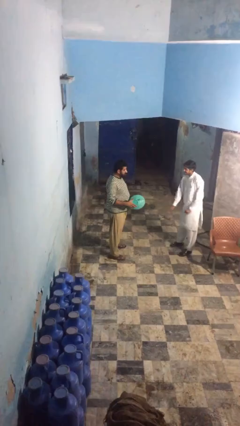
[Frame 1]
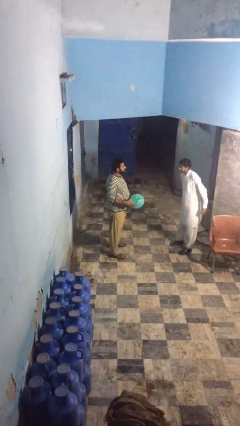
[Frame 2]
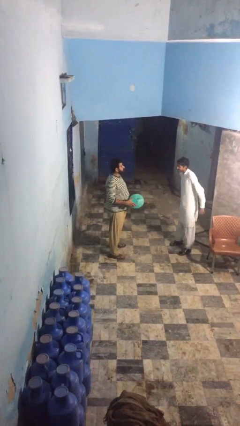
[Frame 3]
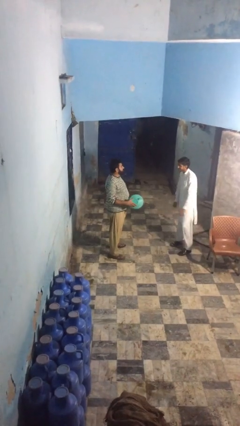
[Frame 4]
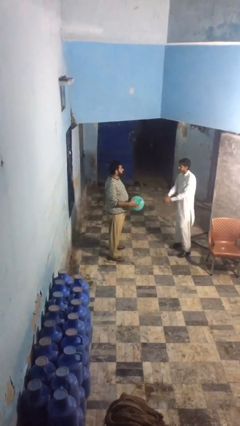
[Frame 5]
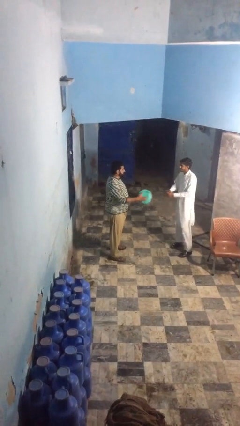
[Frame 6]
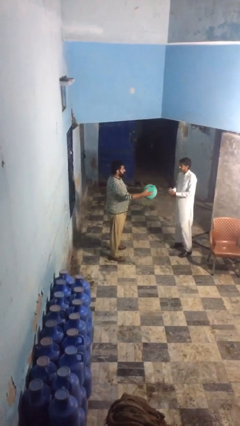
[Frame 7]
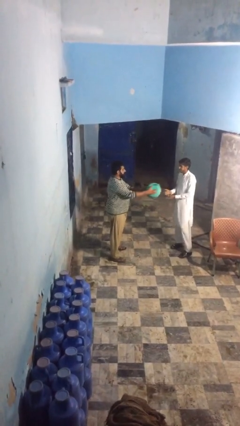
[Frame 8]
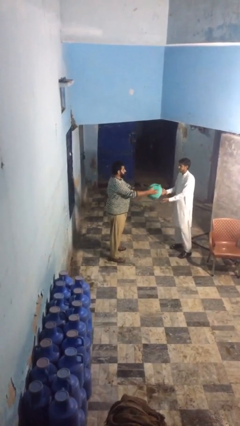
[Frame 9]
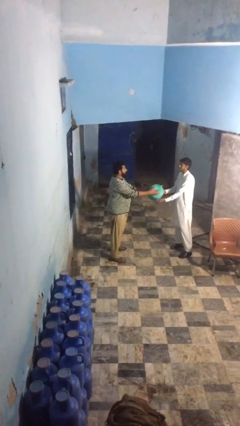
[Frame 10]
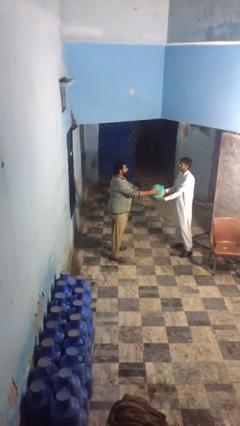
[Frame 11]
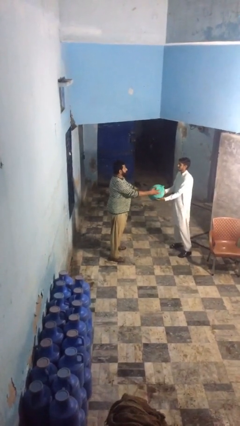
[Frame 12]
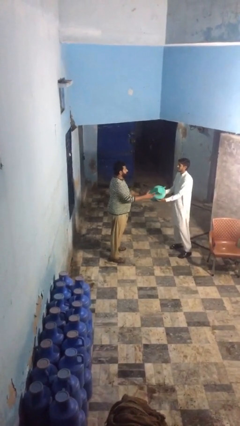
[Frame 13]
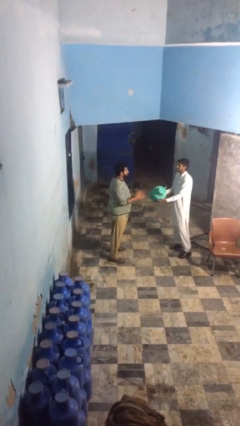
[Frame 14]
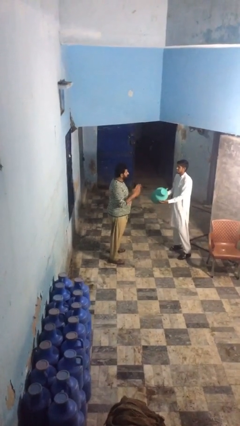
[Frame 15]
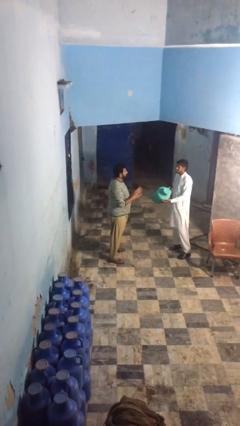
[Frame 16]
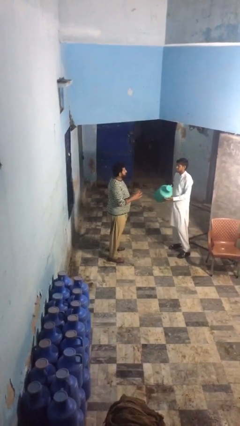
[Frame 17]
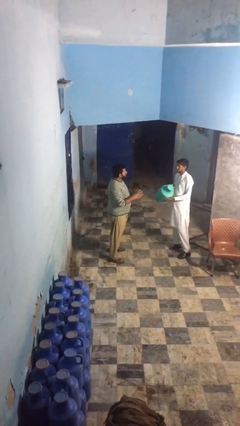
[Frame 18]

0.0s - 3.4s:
person transfers object to person

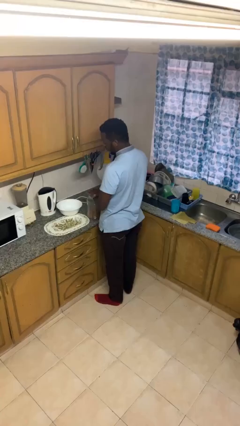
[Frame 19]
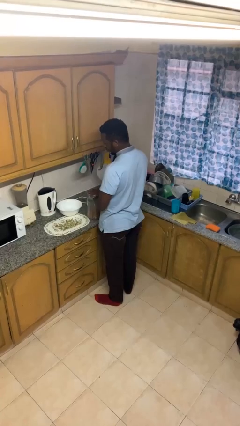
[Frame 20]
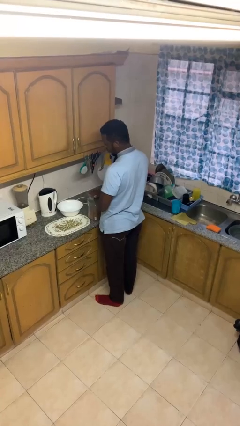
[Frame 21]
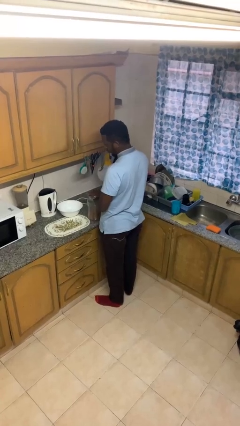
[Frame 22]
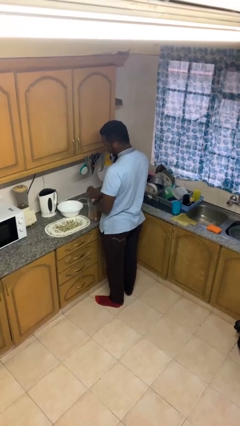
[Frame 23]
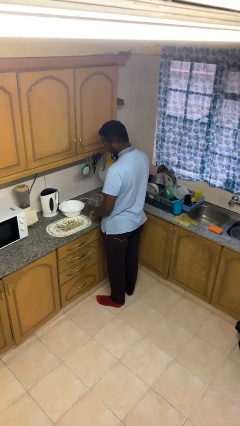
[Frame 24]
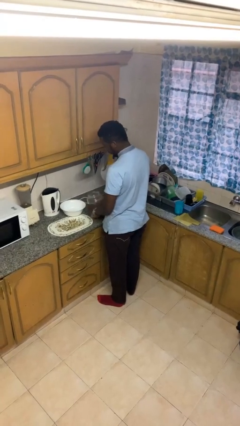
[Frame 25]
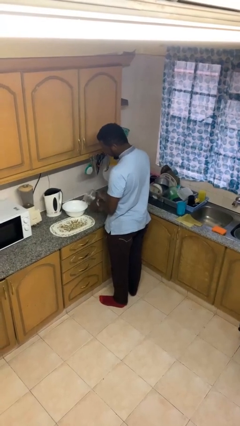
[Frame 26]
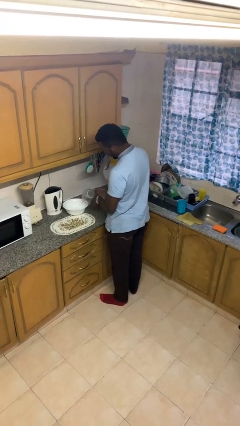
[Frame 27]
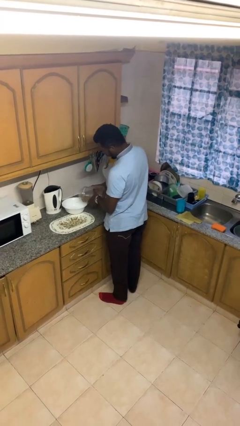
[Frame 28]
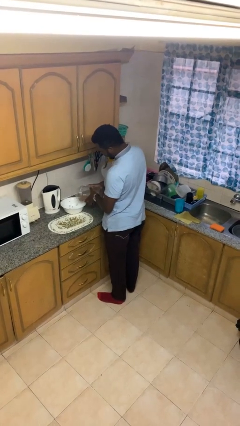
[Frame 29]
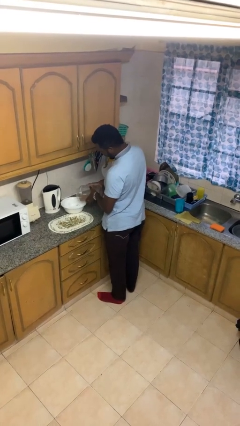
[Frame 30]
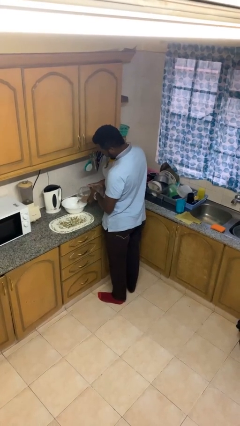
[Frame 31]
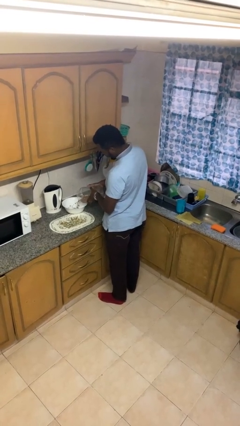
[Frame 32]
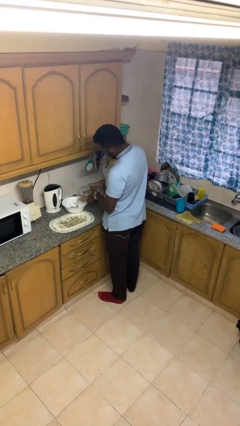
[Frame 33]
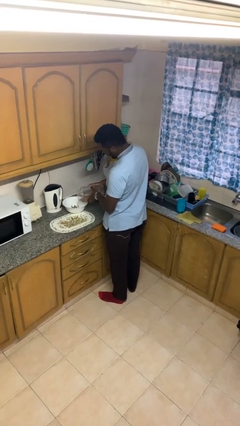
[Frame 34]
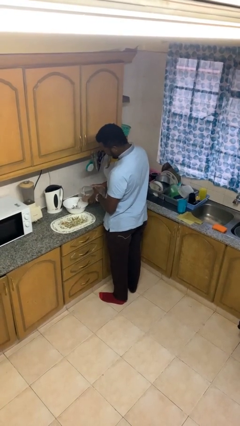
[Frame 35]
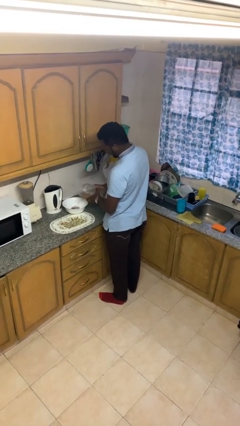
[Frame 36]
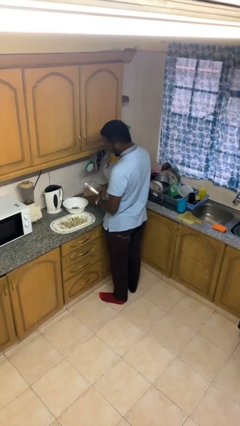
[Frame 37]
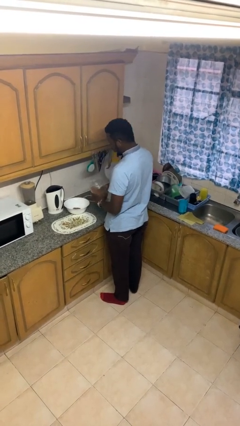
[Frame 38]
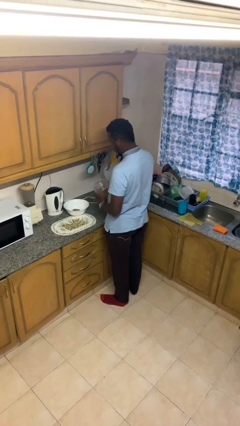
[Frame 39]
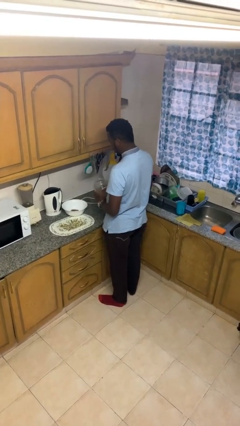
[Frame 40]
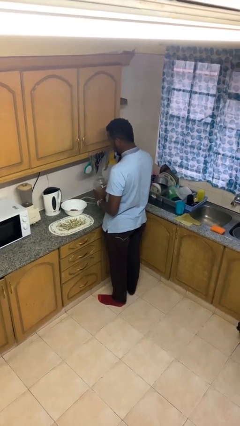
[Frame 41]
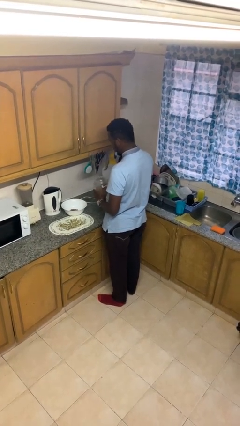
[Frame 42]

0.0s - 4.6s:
person pours into bowl

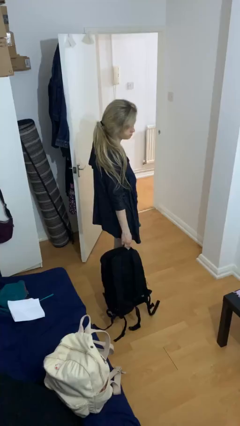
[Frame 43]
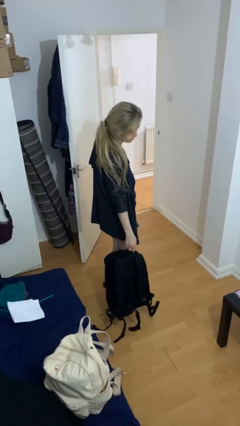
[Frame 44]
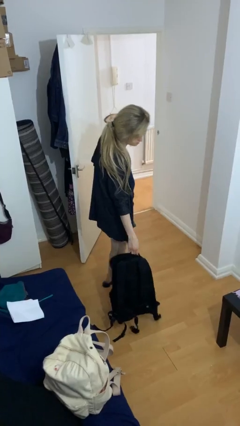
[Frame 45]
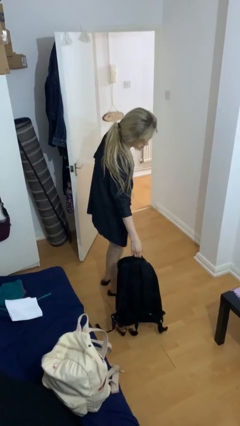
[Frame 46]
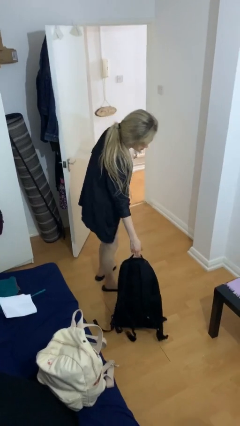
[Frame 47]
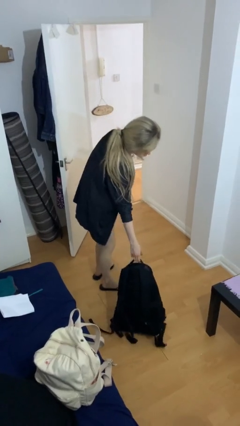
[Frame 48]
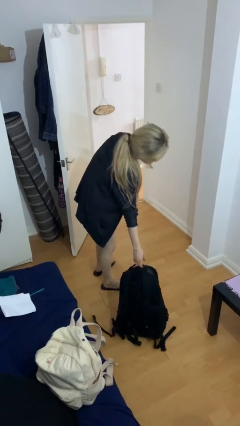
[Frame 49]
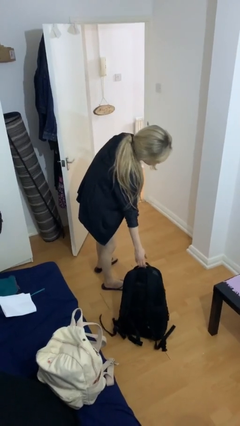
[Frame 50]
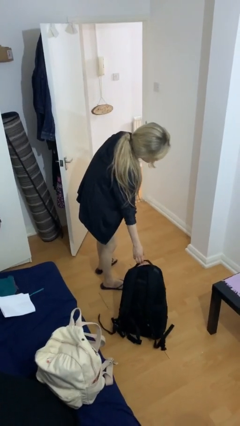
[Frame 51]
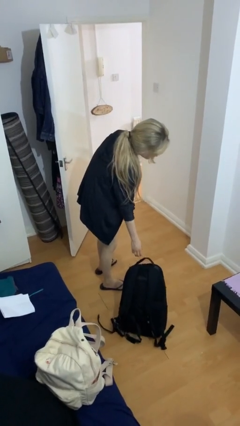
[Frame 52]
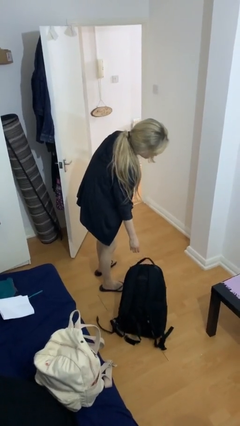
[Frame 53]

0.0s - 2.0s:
person puts down object on floor

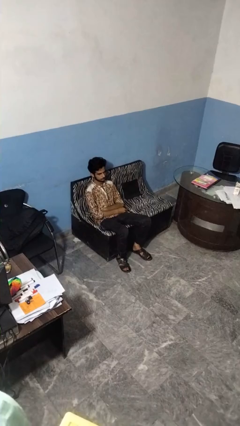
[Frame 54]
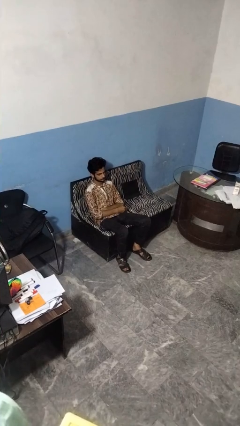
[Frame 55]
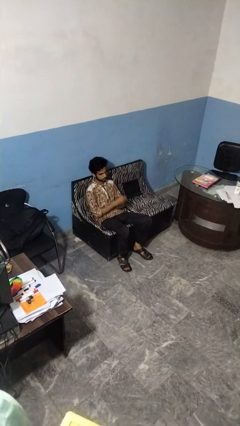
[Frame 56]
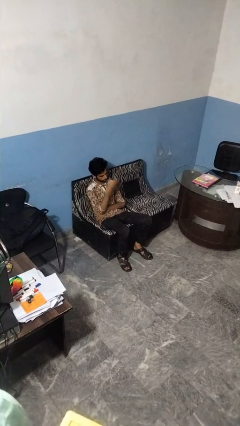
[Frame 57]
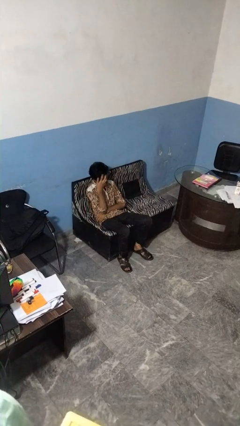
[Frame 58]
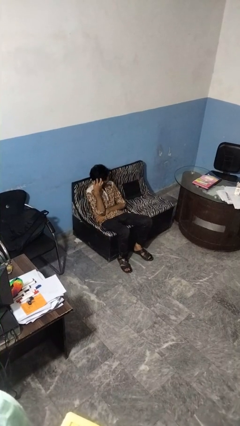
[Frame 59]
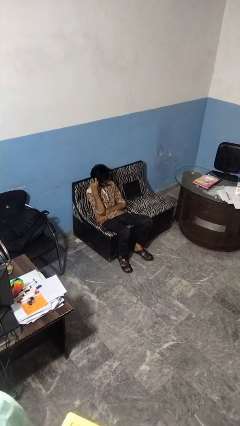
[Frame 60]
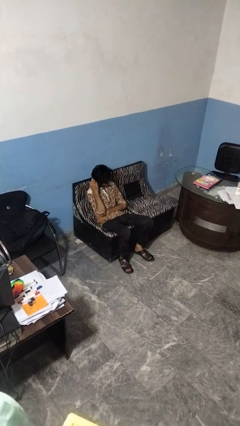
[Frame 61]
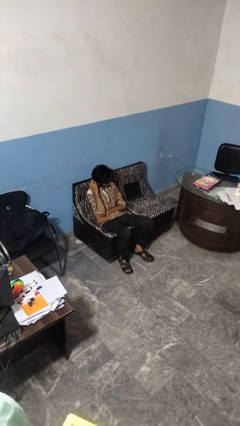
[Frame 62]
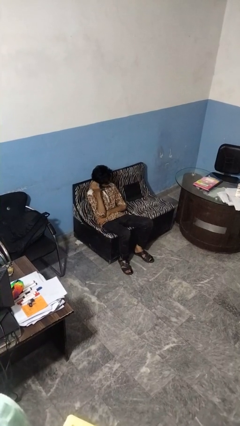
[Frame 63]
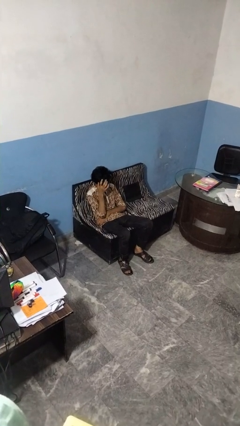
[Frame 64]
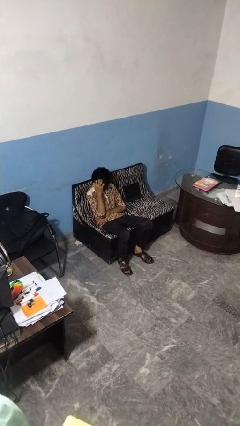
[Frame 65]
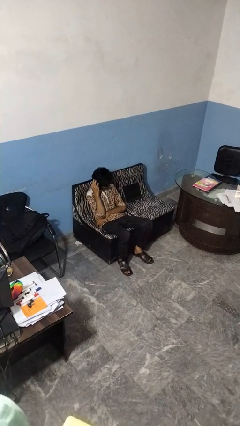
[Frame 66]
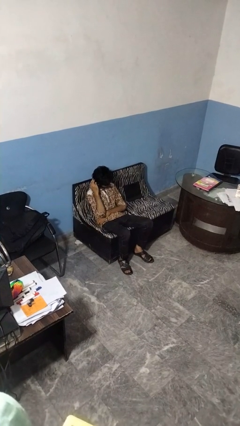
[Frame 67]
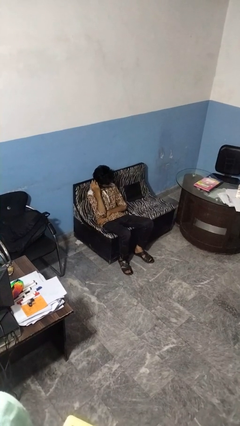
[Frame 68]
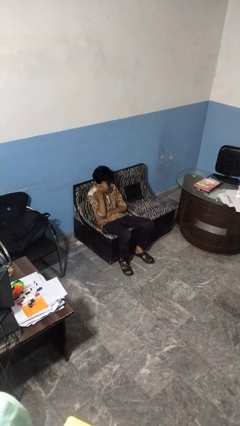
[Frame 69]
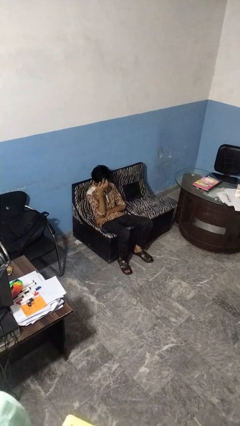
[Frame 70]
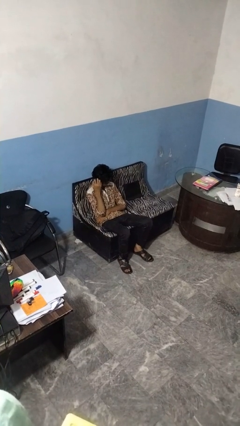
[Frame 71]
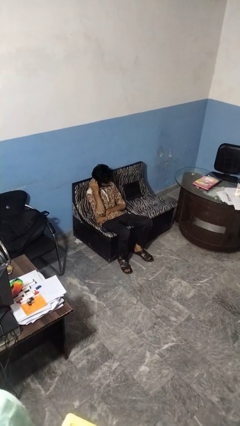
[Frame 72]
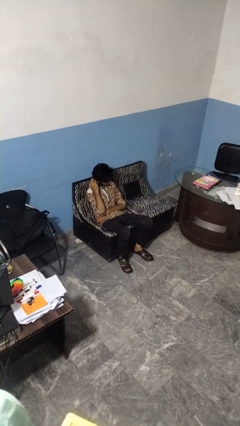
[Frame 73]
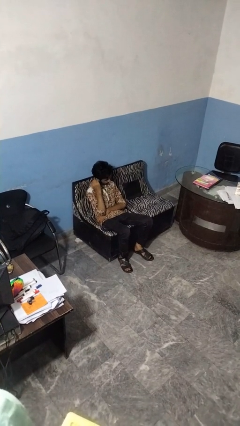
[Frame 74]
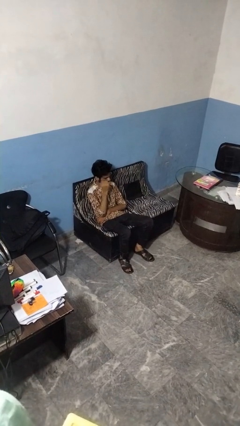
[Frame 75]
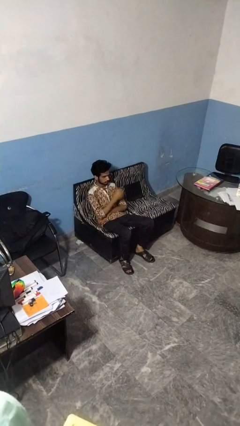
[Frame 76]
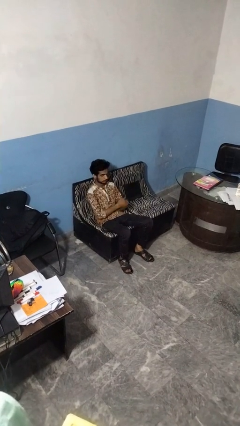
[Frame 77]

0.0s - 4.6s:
person strokes hair

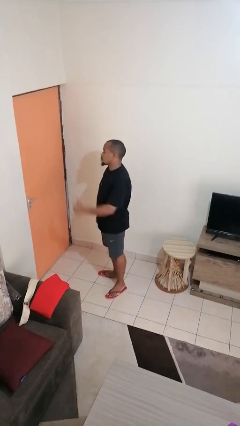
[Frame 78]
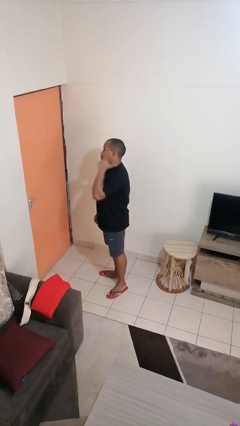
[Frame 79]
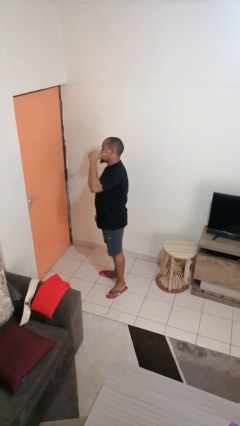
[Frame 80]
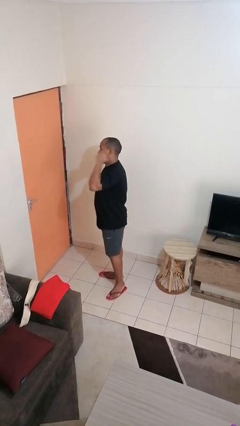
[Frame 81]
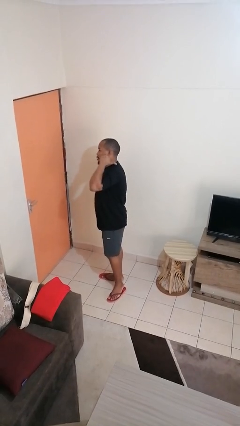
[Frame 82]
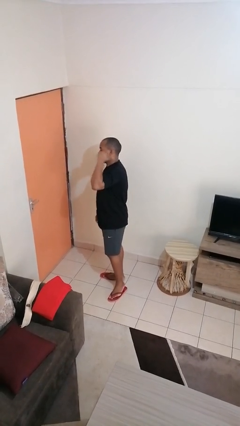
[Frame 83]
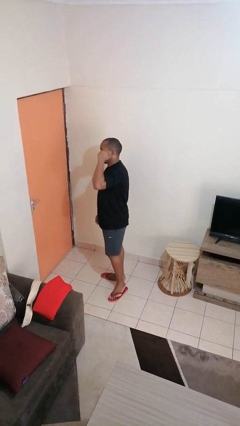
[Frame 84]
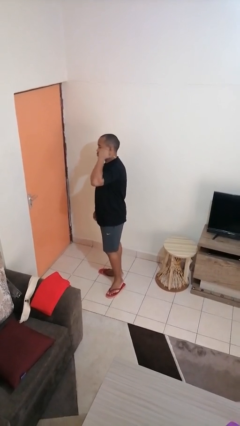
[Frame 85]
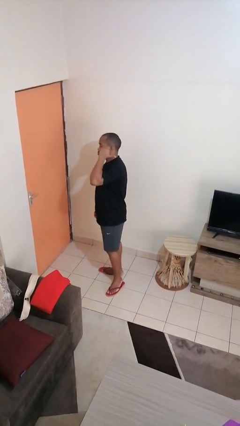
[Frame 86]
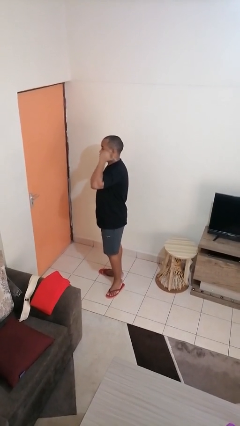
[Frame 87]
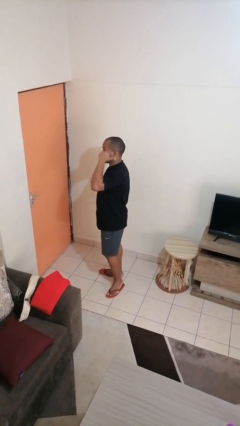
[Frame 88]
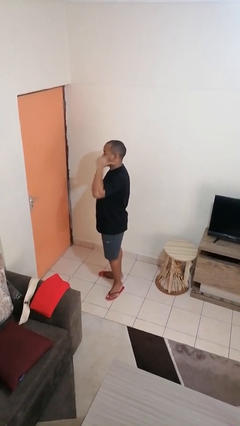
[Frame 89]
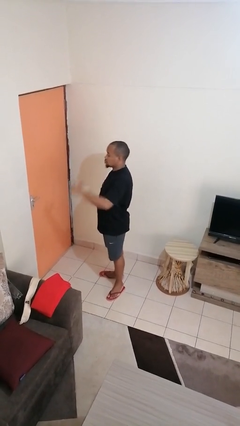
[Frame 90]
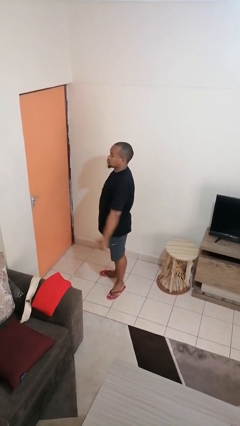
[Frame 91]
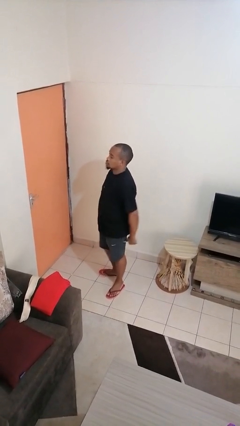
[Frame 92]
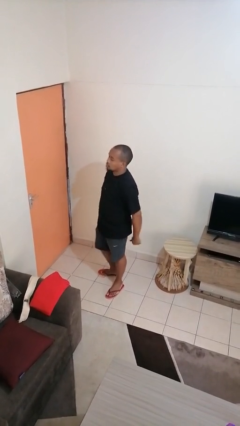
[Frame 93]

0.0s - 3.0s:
person gestures behind me

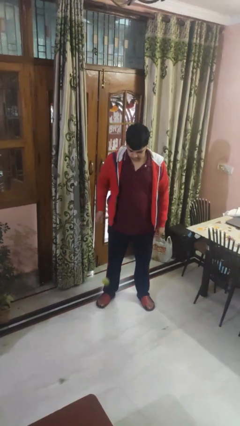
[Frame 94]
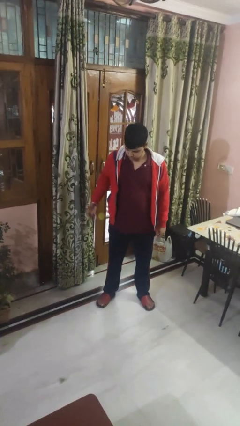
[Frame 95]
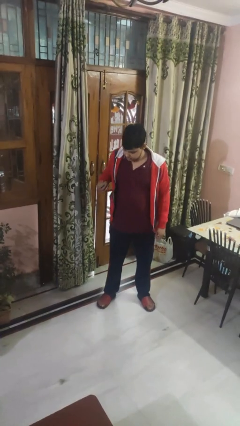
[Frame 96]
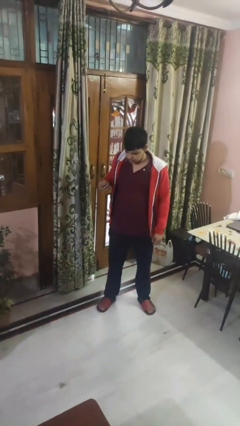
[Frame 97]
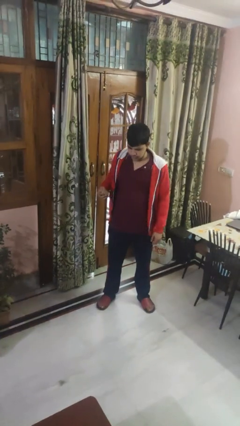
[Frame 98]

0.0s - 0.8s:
person bounces ball on floor
